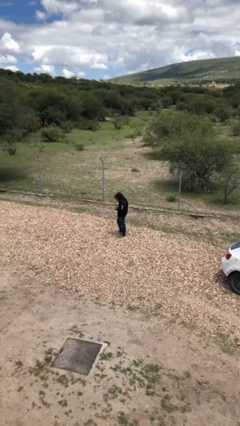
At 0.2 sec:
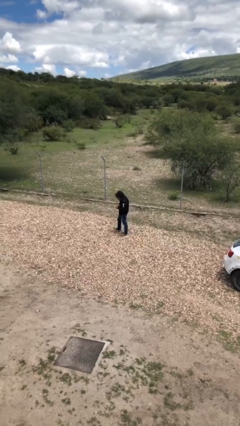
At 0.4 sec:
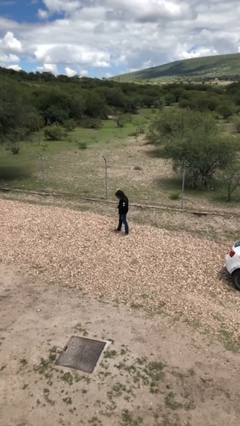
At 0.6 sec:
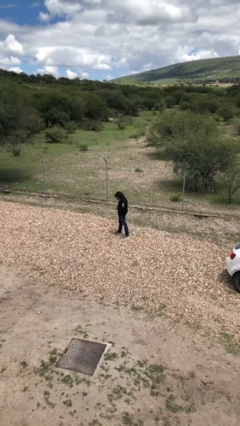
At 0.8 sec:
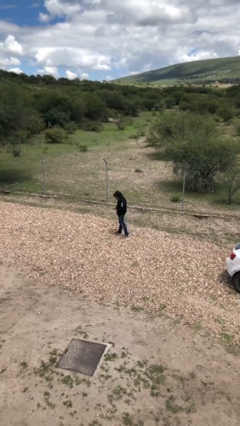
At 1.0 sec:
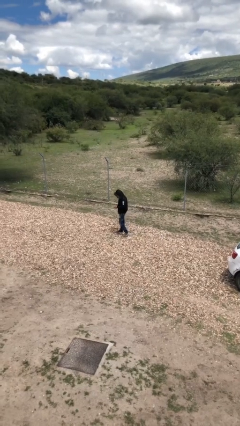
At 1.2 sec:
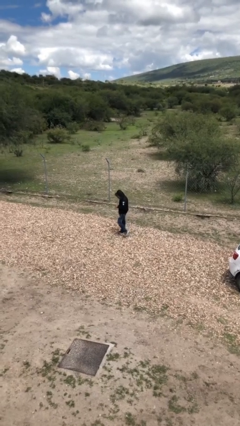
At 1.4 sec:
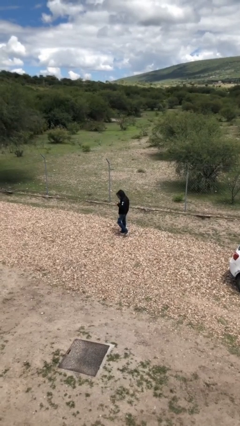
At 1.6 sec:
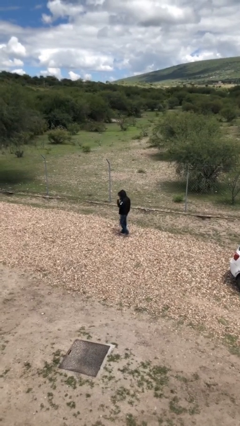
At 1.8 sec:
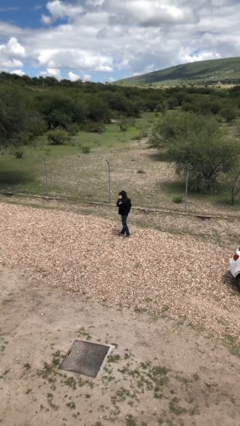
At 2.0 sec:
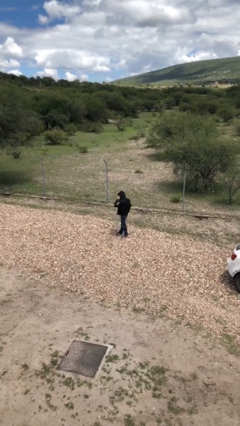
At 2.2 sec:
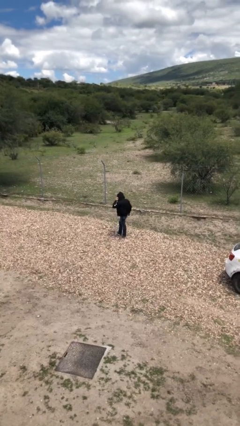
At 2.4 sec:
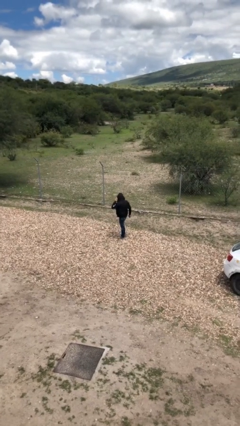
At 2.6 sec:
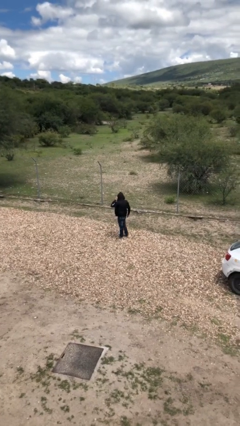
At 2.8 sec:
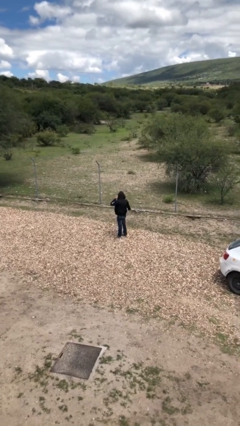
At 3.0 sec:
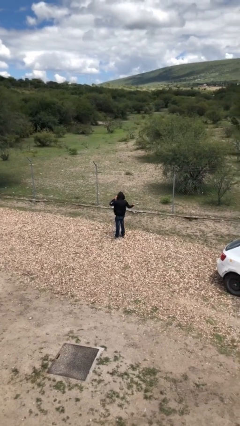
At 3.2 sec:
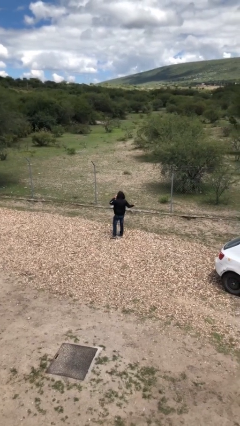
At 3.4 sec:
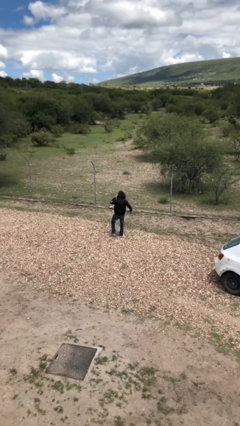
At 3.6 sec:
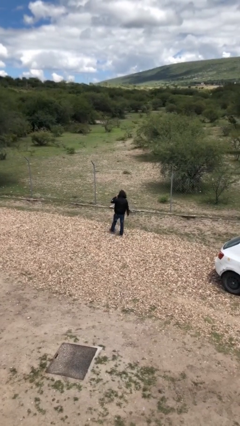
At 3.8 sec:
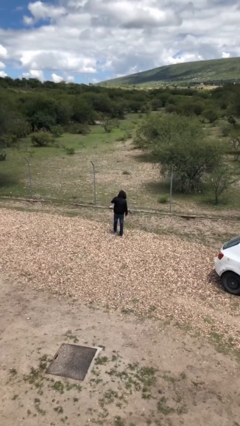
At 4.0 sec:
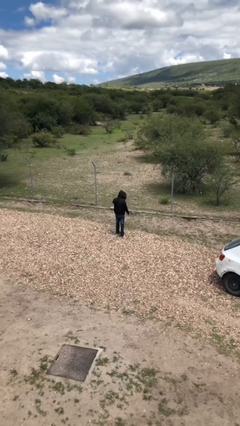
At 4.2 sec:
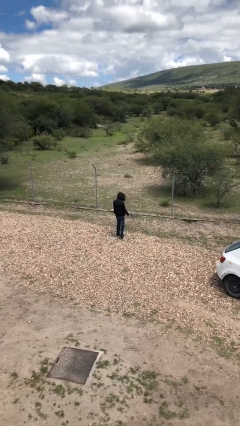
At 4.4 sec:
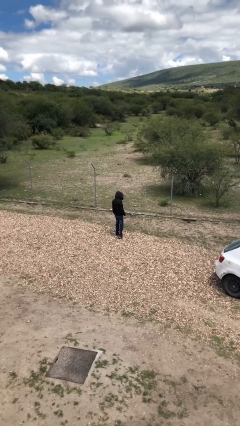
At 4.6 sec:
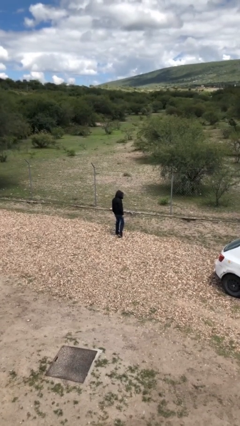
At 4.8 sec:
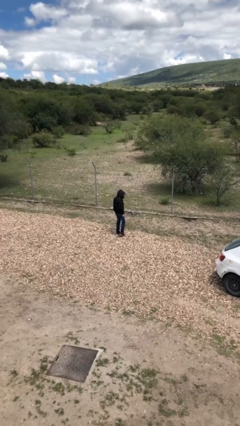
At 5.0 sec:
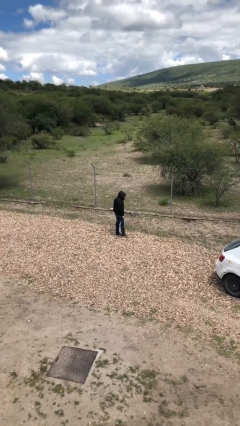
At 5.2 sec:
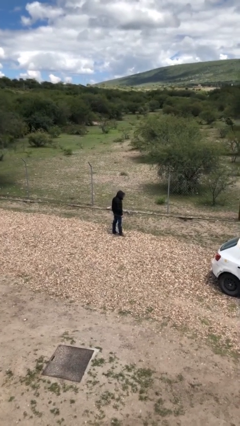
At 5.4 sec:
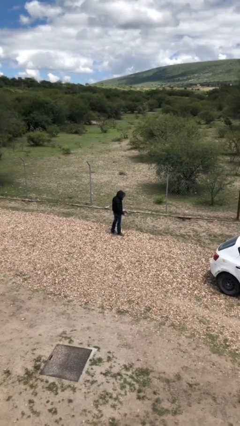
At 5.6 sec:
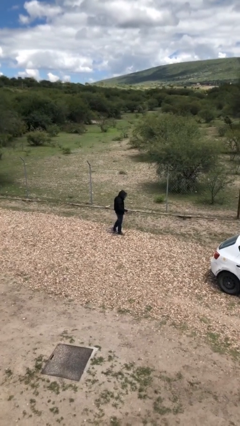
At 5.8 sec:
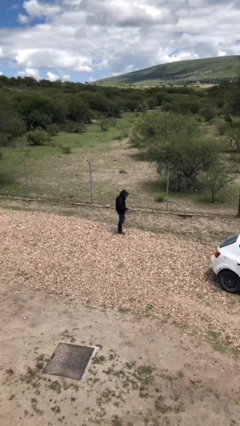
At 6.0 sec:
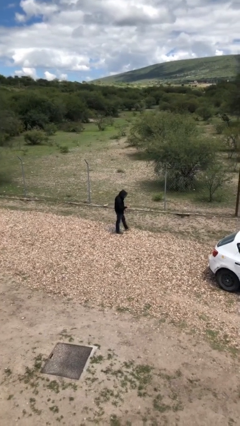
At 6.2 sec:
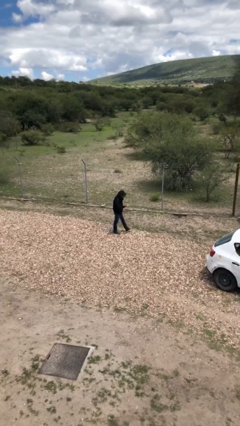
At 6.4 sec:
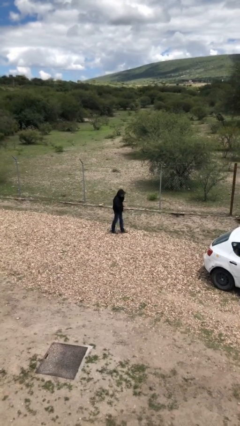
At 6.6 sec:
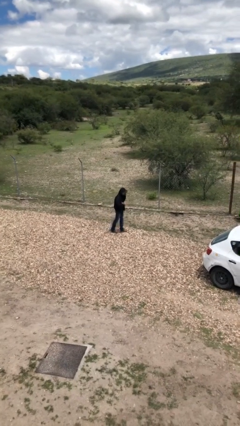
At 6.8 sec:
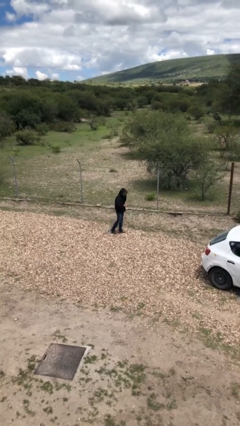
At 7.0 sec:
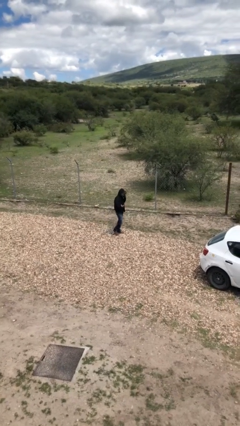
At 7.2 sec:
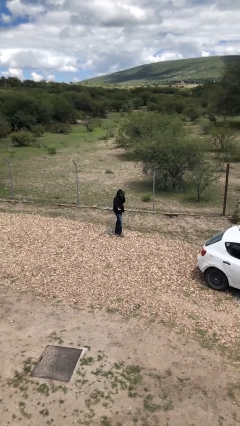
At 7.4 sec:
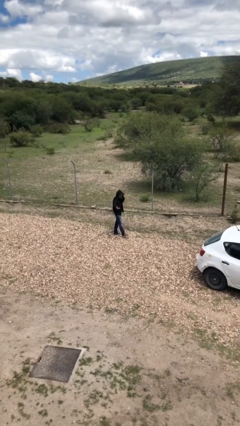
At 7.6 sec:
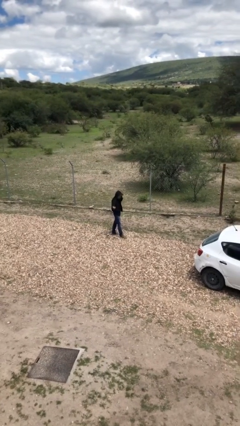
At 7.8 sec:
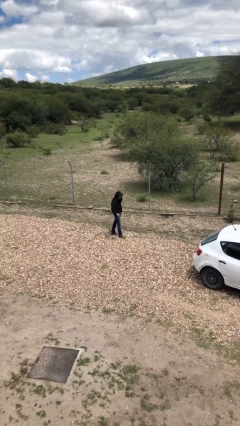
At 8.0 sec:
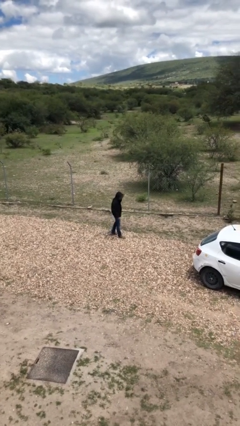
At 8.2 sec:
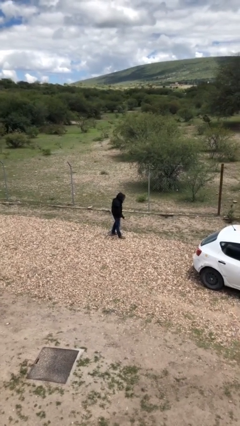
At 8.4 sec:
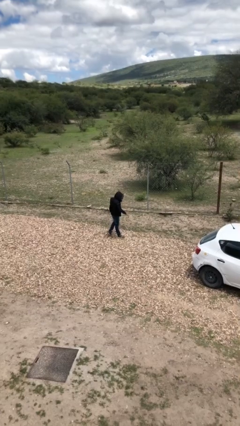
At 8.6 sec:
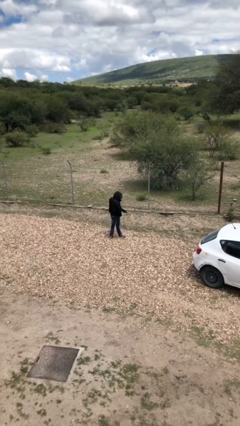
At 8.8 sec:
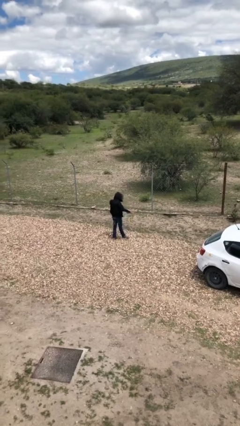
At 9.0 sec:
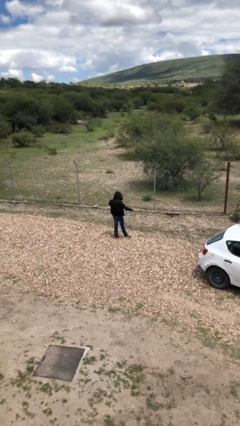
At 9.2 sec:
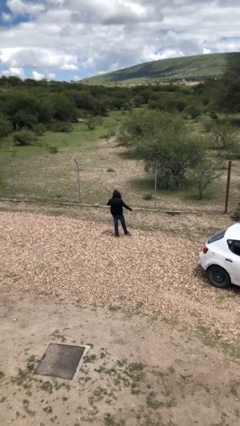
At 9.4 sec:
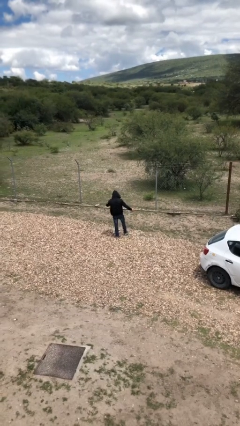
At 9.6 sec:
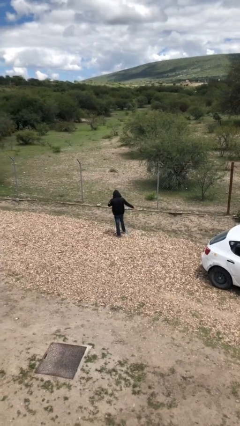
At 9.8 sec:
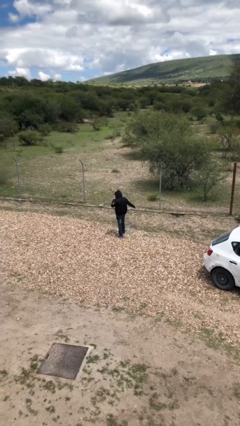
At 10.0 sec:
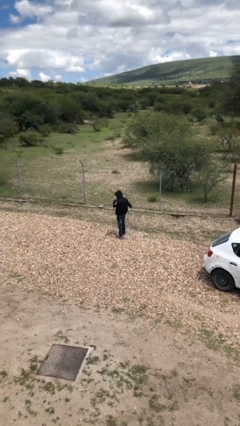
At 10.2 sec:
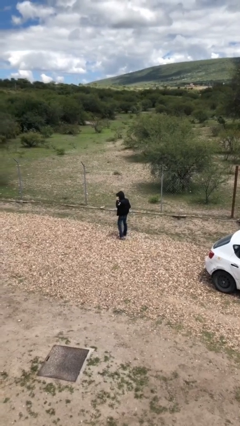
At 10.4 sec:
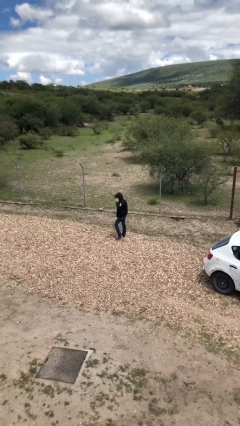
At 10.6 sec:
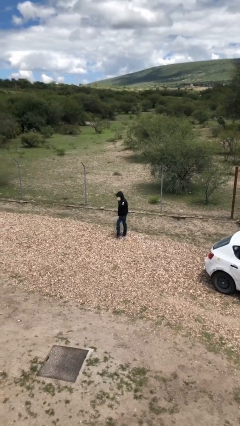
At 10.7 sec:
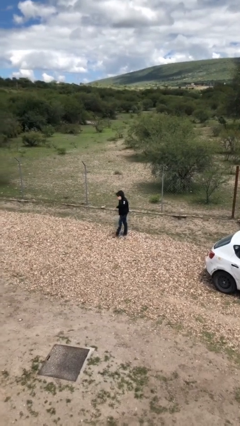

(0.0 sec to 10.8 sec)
person talks on phone

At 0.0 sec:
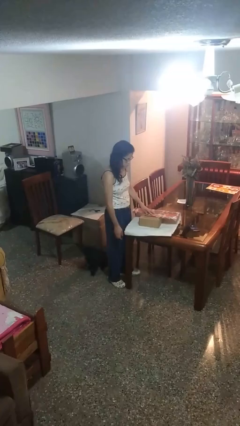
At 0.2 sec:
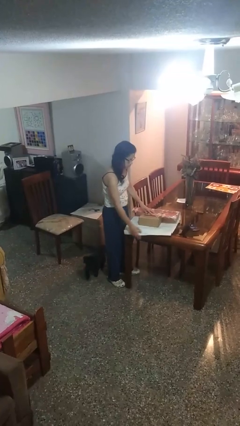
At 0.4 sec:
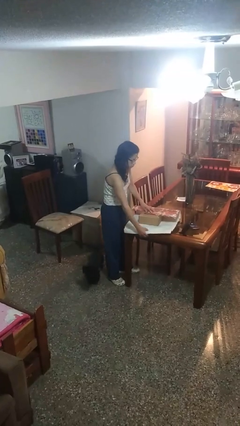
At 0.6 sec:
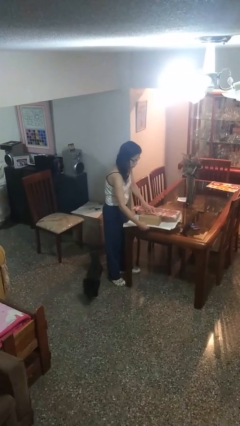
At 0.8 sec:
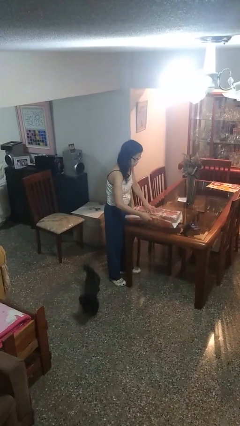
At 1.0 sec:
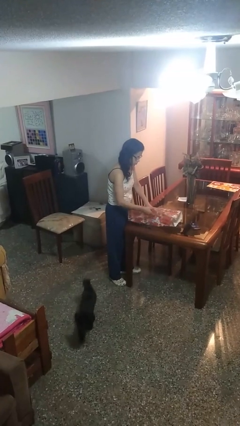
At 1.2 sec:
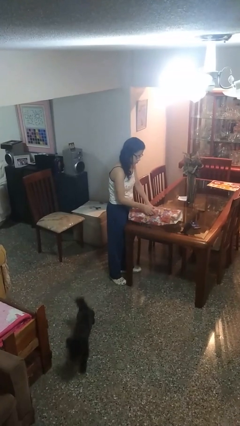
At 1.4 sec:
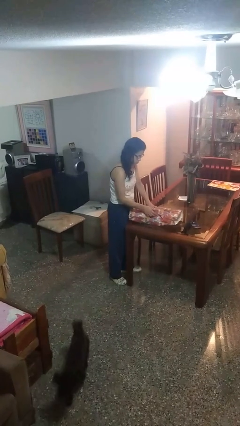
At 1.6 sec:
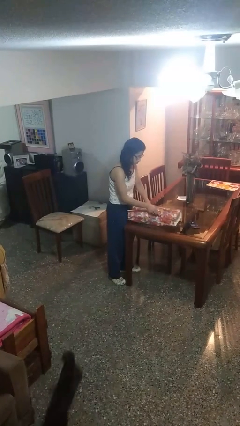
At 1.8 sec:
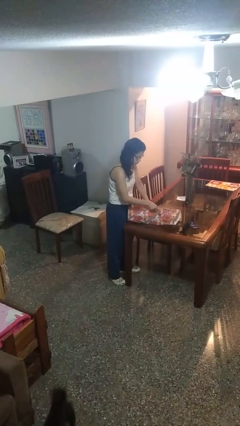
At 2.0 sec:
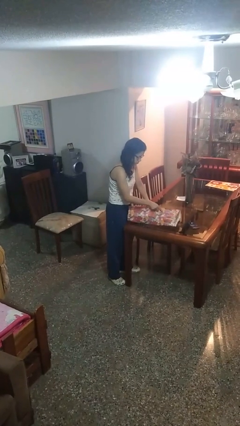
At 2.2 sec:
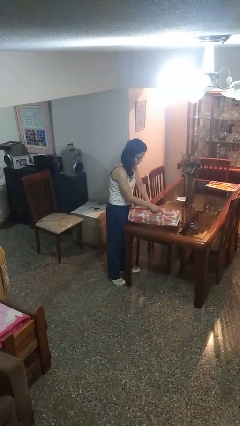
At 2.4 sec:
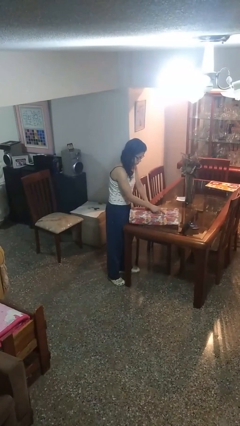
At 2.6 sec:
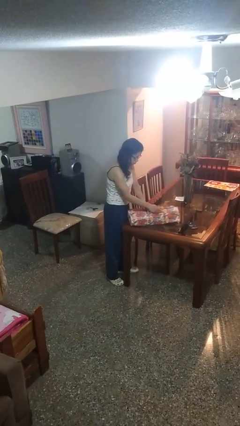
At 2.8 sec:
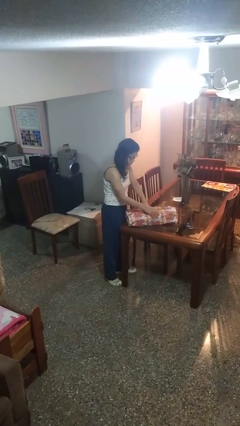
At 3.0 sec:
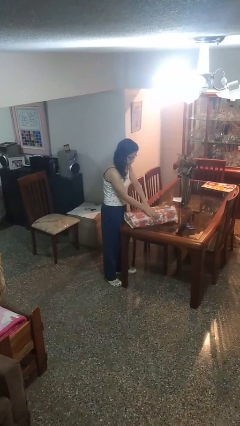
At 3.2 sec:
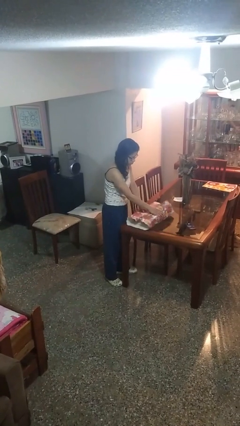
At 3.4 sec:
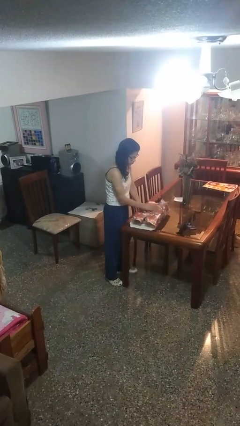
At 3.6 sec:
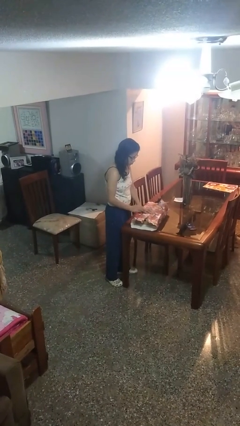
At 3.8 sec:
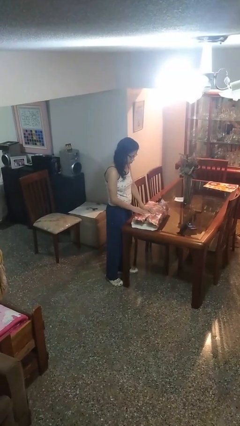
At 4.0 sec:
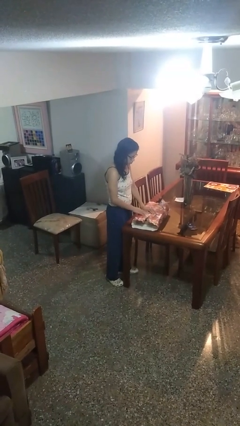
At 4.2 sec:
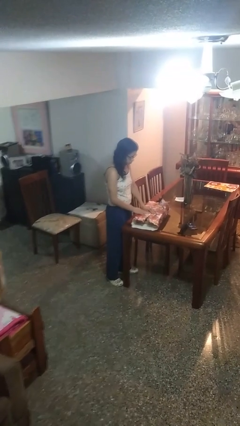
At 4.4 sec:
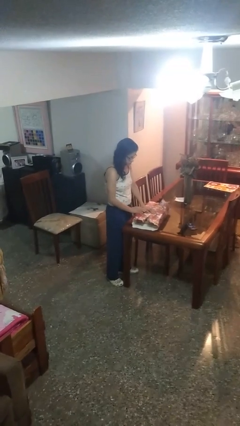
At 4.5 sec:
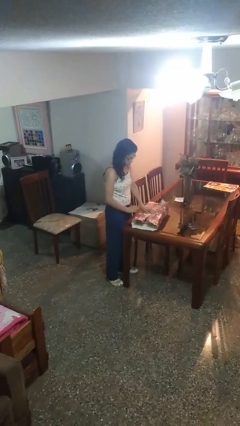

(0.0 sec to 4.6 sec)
person wraps box

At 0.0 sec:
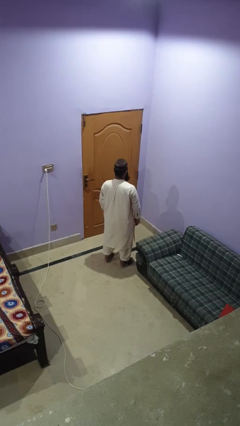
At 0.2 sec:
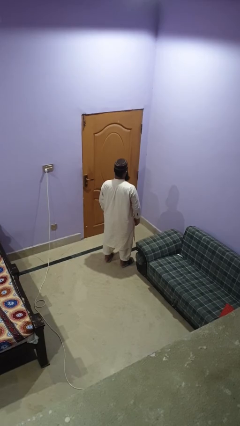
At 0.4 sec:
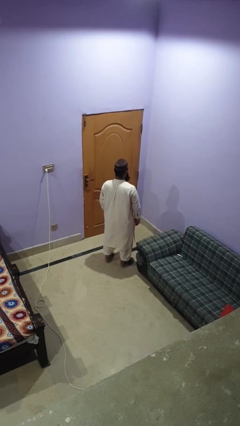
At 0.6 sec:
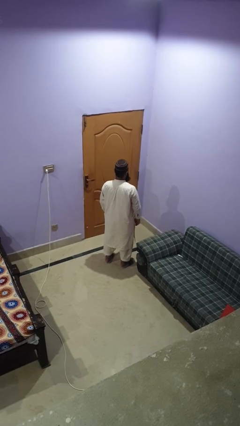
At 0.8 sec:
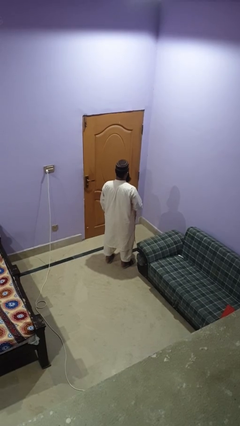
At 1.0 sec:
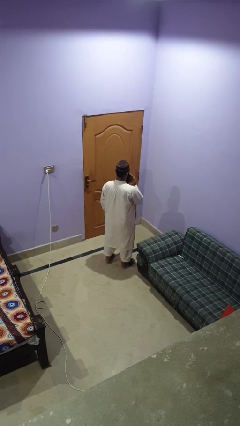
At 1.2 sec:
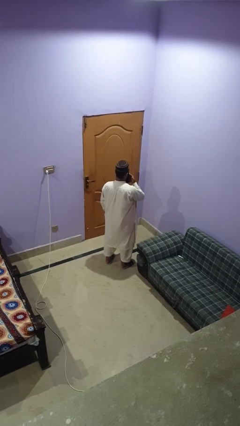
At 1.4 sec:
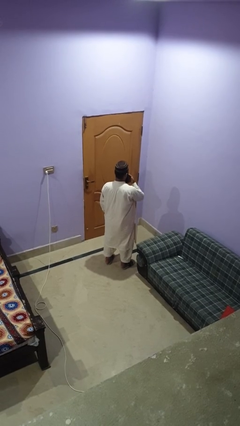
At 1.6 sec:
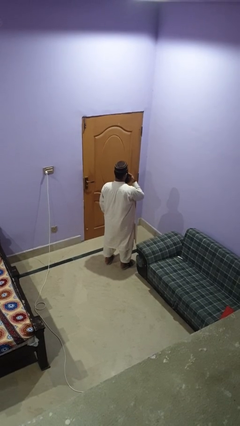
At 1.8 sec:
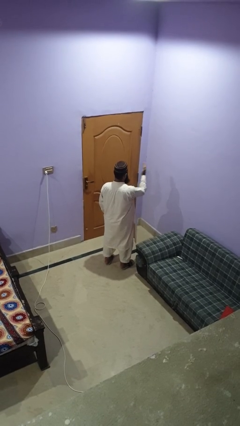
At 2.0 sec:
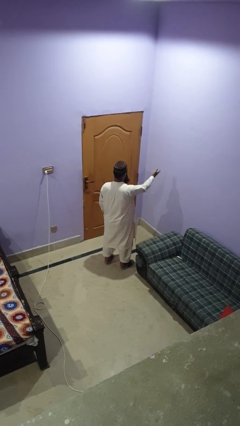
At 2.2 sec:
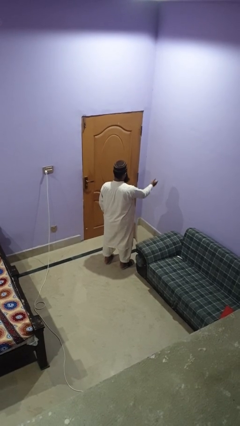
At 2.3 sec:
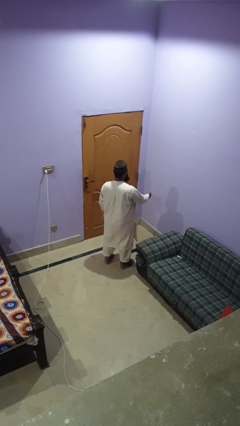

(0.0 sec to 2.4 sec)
person gestures blow kiss
